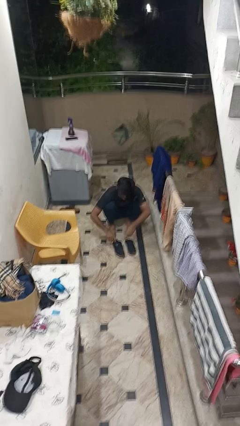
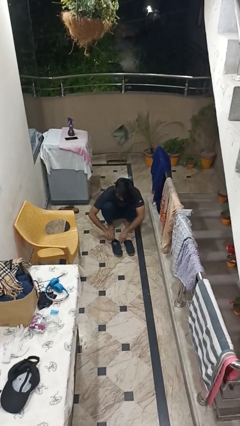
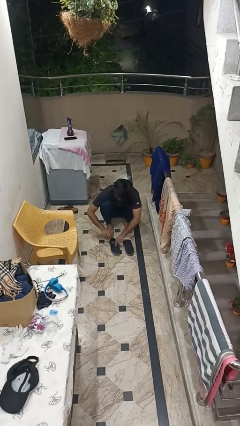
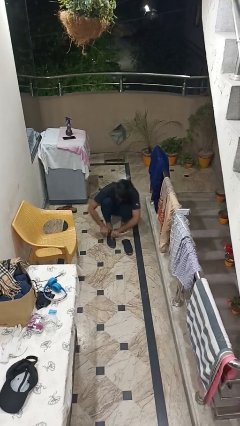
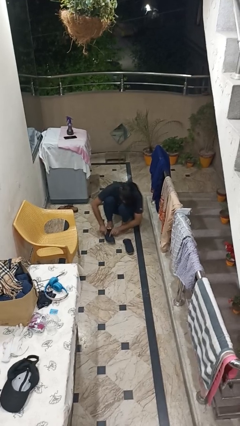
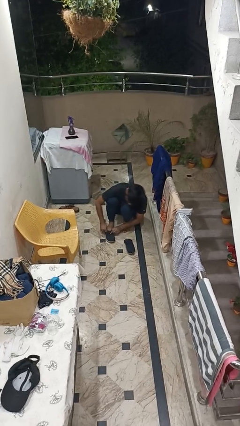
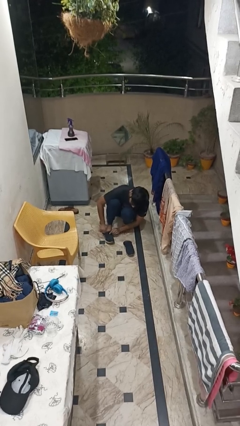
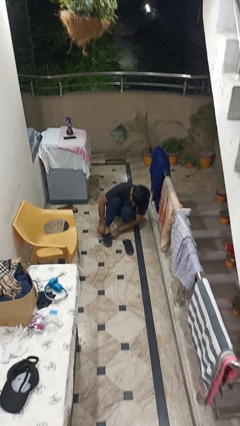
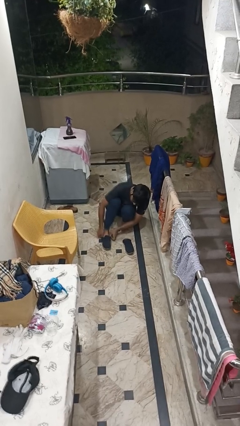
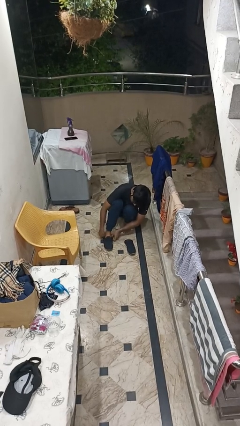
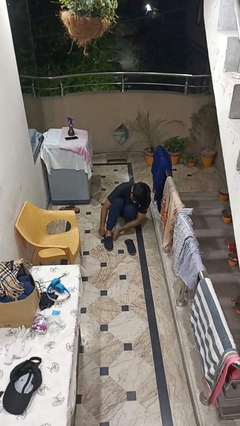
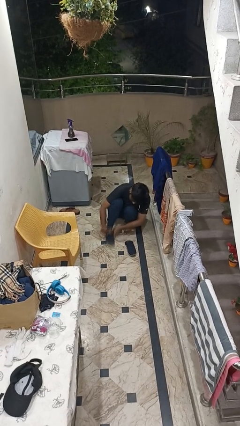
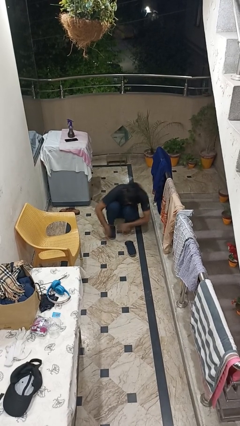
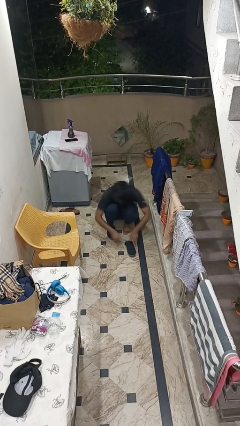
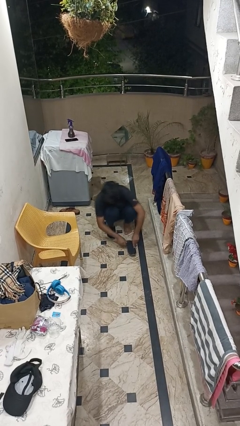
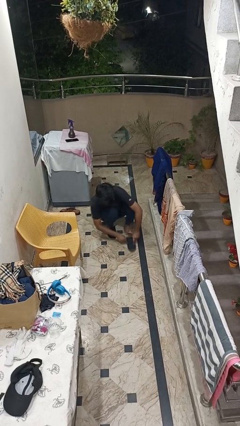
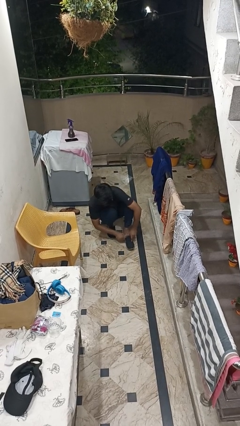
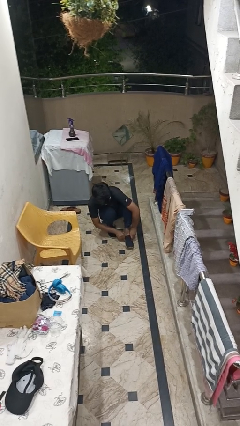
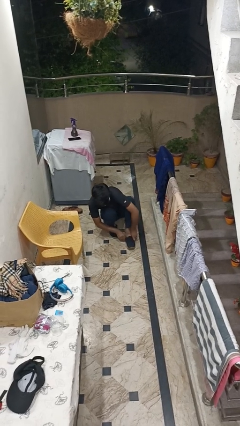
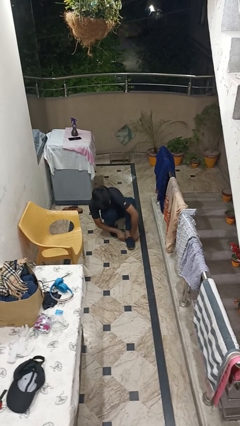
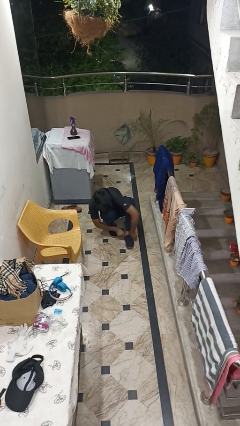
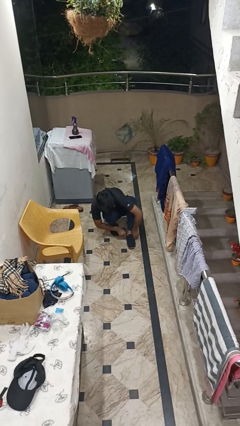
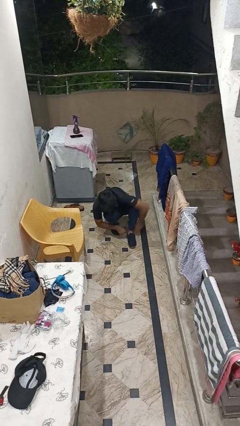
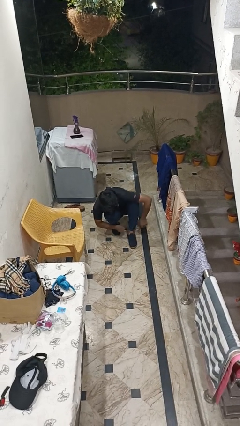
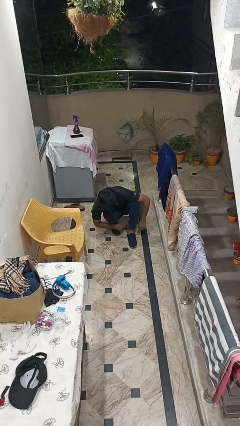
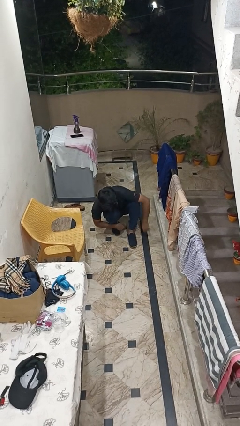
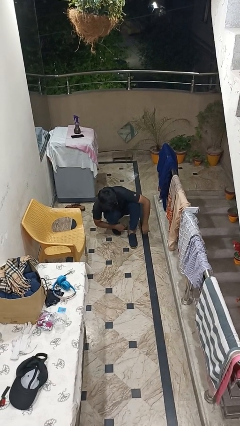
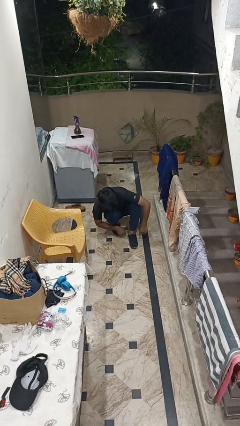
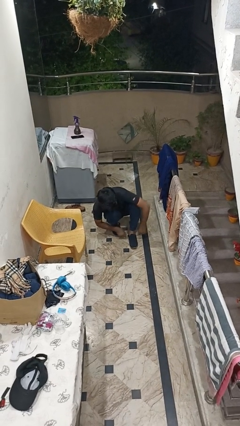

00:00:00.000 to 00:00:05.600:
person puts on shoes

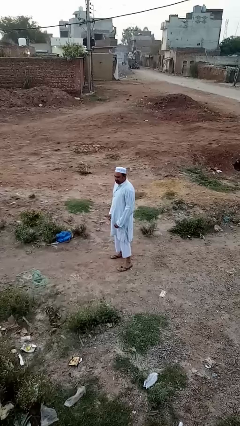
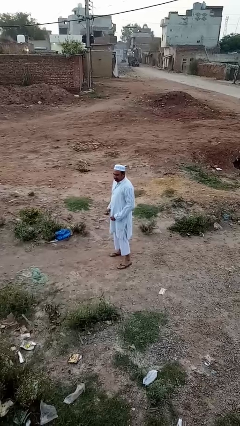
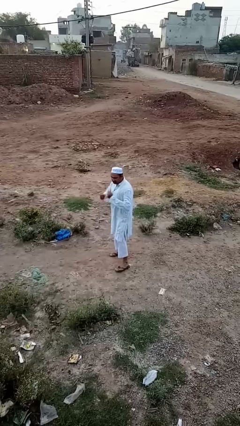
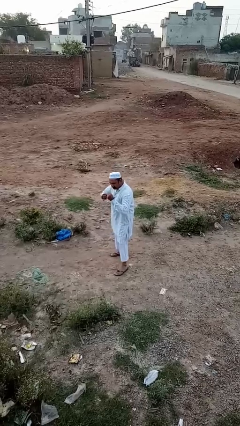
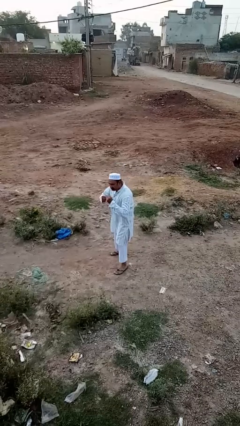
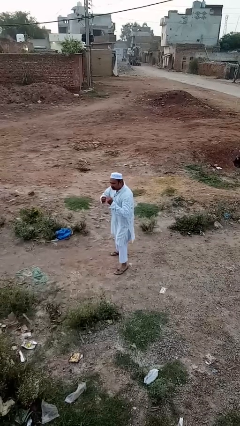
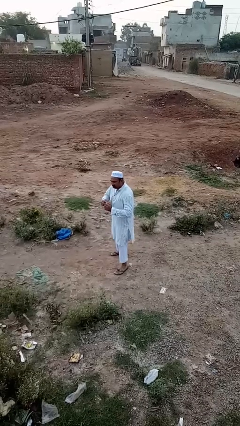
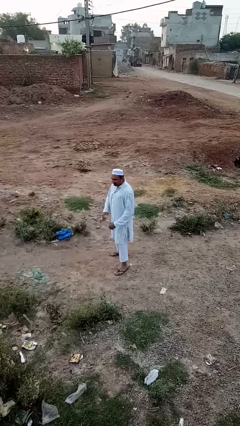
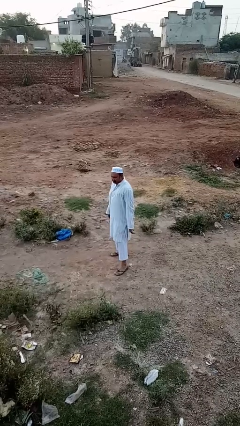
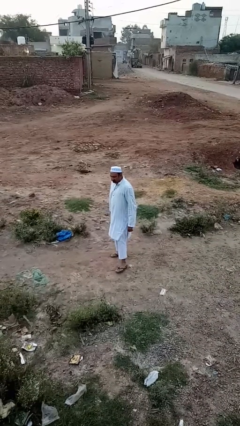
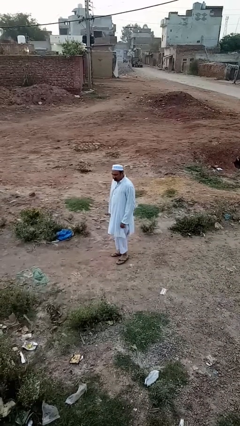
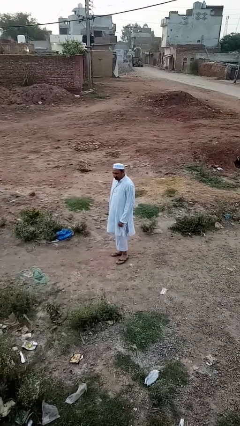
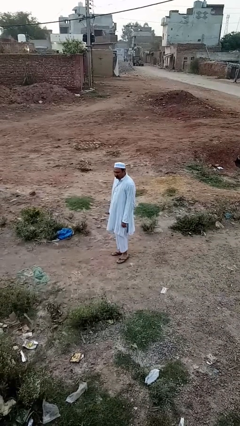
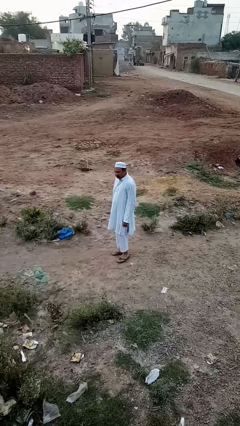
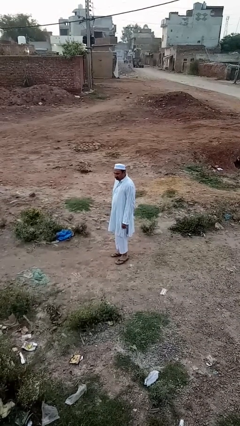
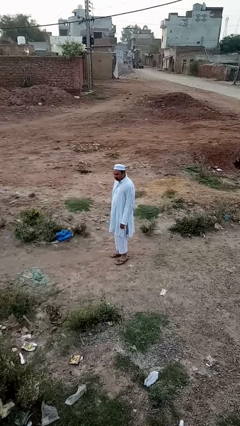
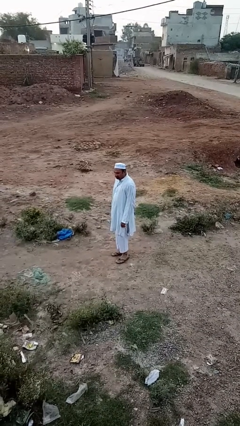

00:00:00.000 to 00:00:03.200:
person karate chop

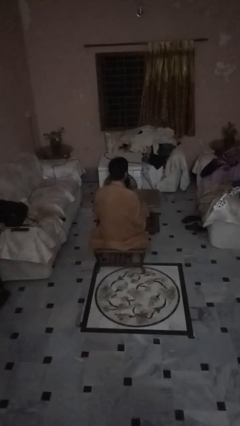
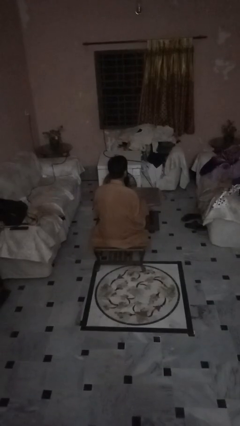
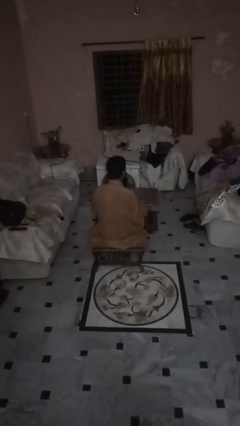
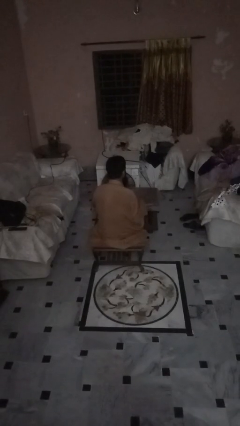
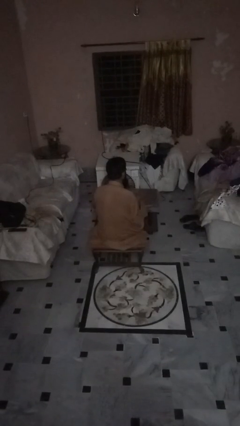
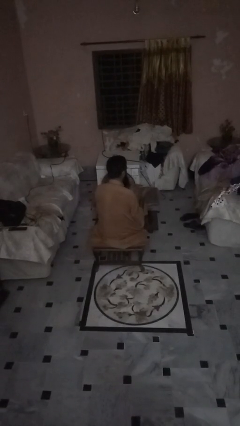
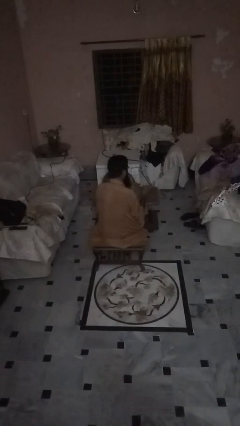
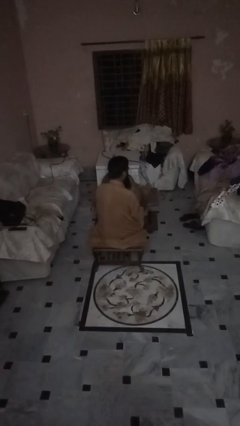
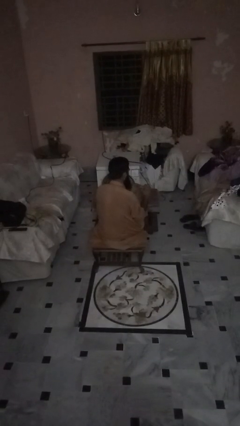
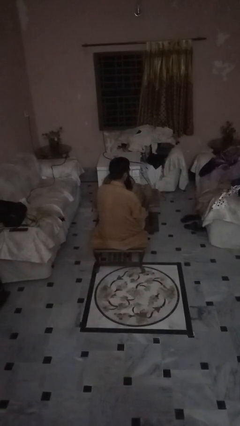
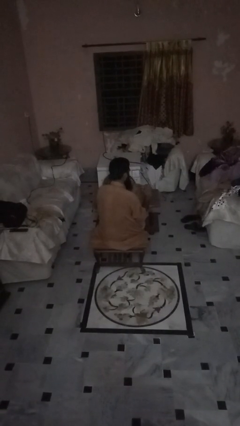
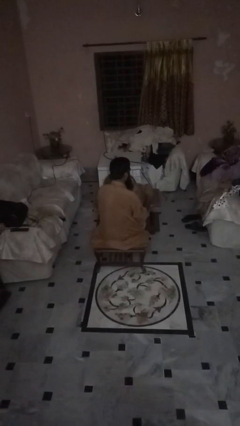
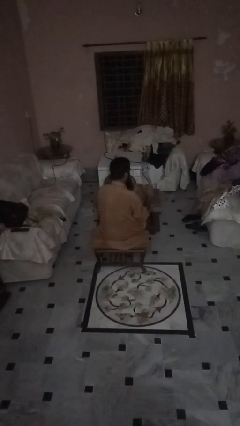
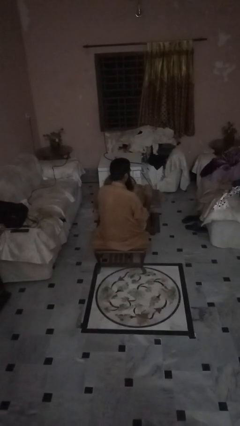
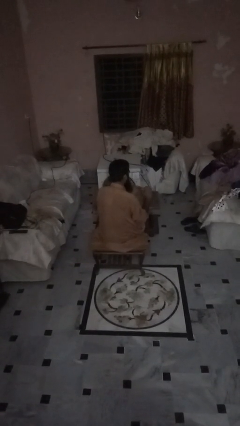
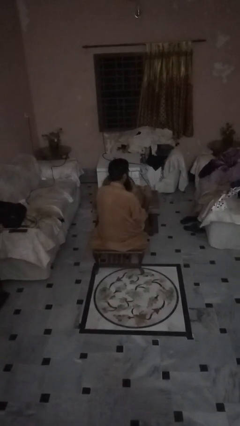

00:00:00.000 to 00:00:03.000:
person files fingernails

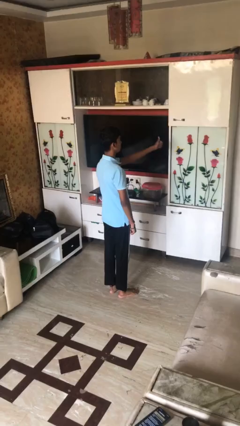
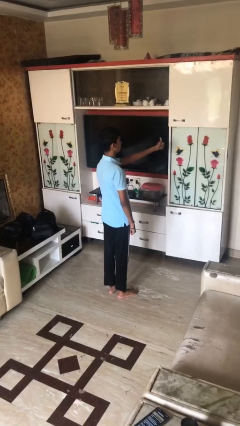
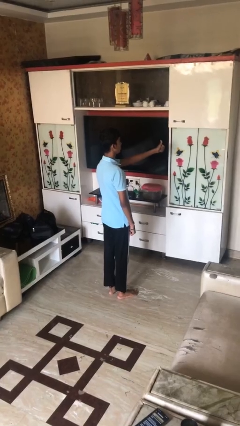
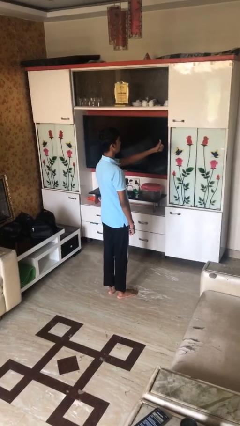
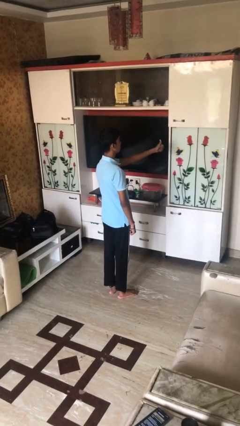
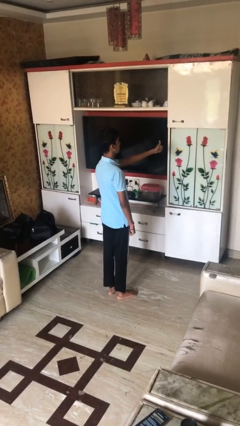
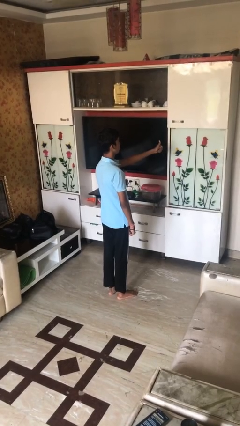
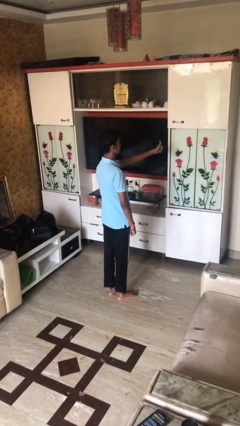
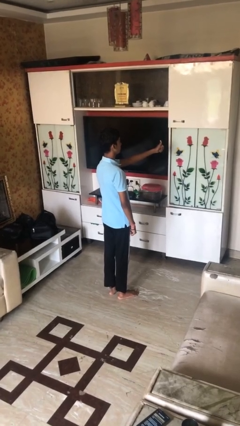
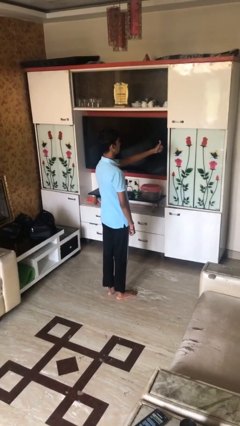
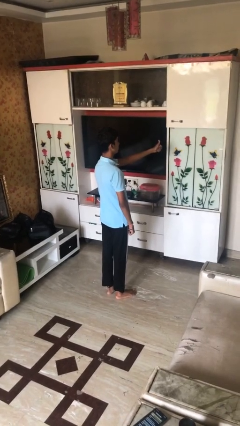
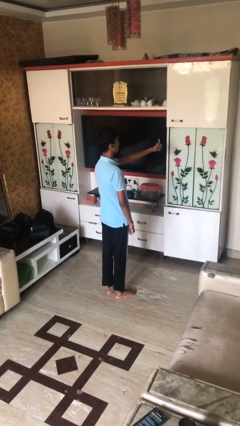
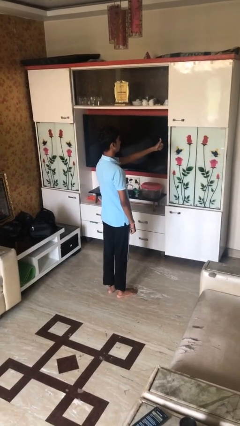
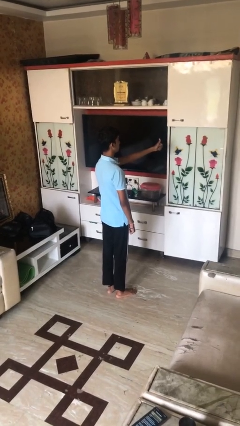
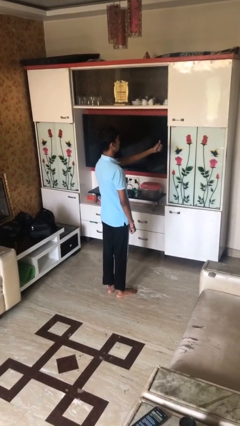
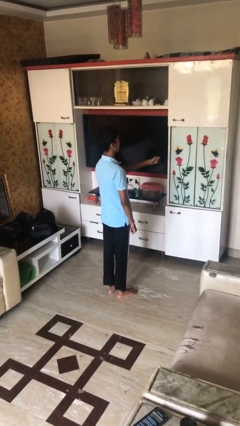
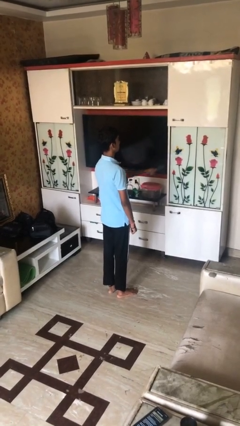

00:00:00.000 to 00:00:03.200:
person gestures thumbs up

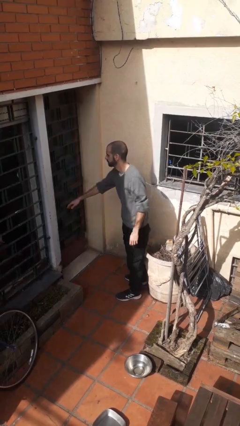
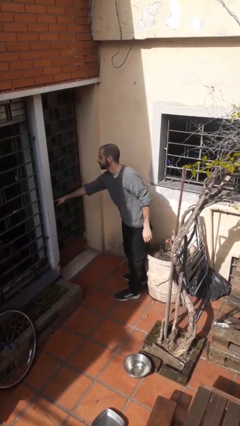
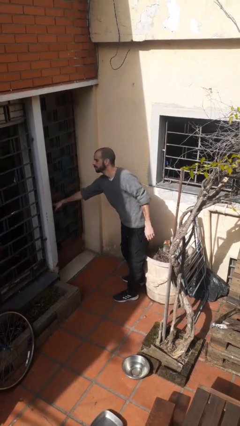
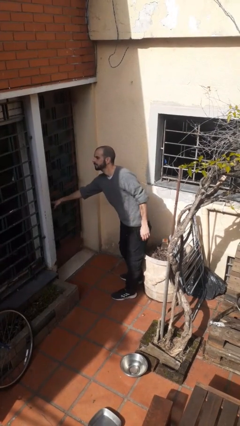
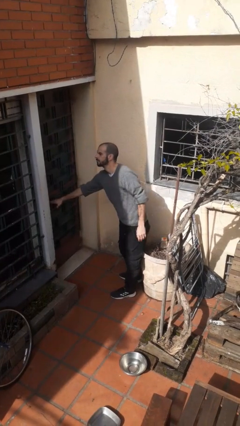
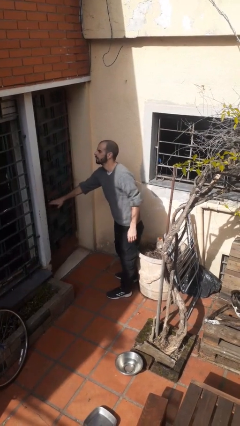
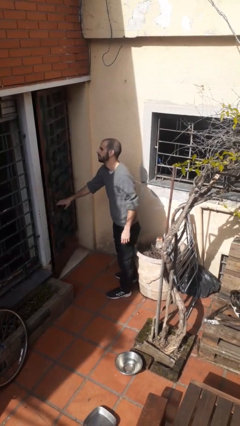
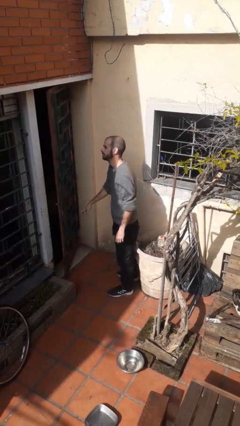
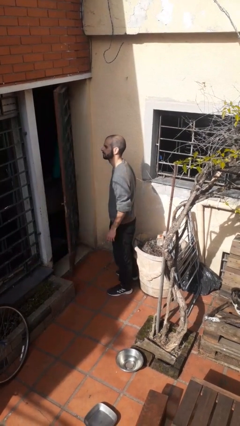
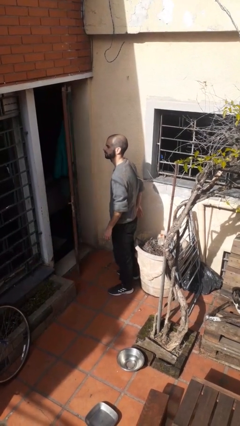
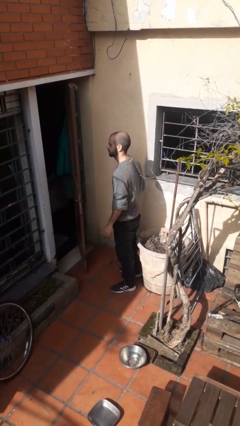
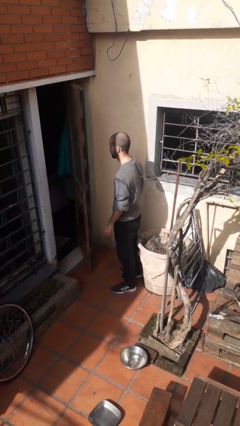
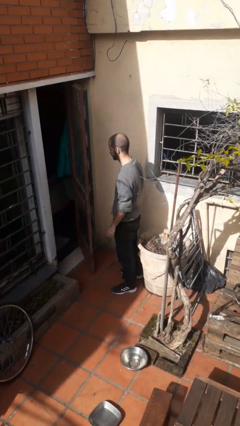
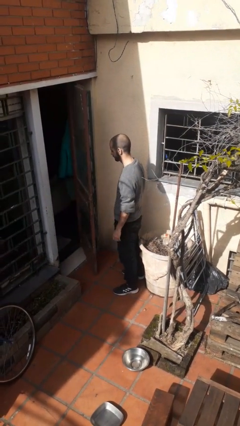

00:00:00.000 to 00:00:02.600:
person opens facility door
